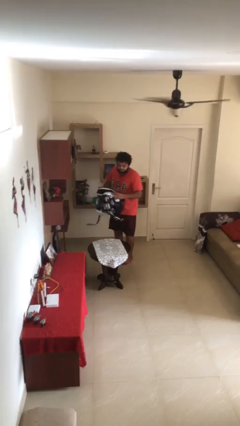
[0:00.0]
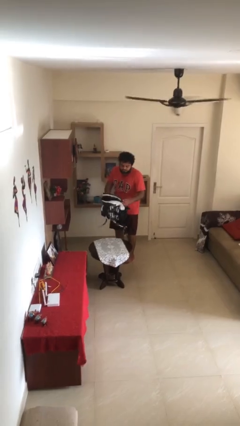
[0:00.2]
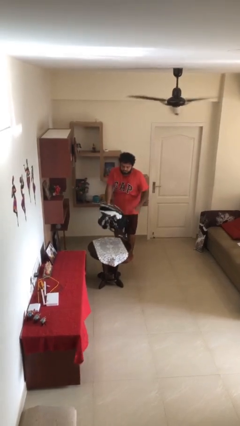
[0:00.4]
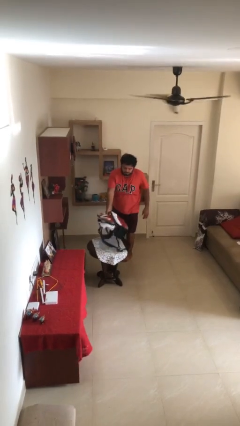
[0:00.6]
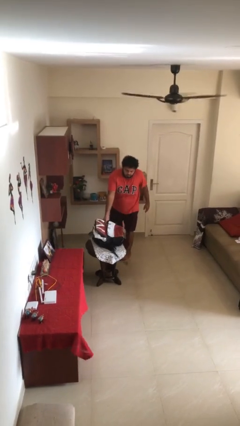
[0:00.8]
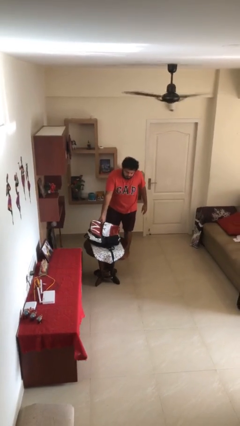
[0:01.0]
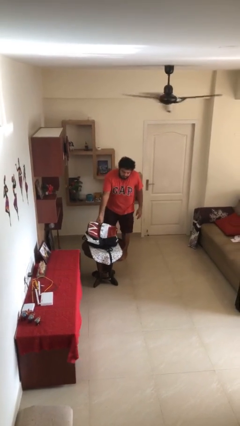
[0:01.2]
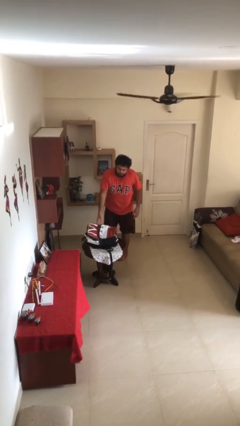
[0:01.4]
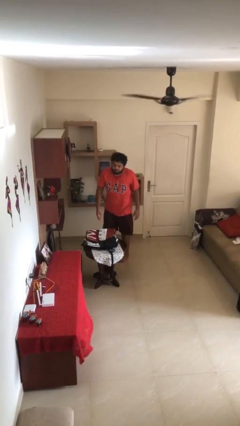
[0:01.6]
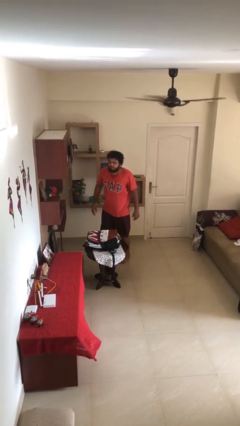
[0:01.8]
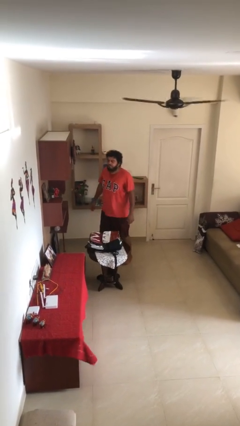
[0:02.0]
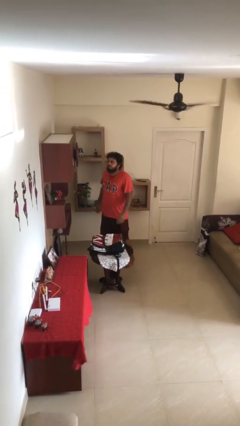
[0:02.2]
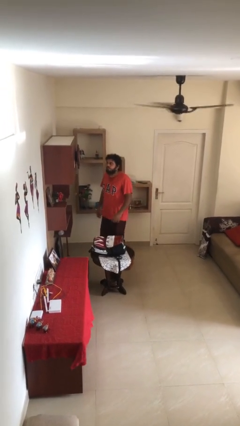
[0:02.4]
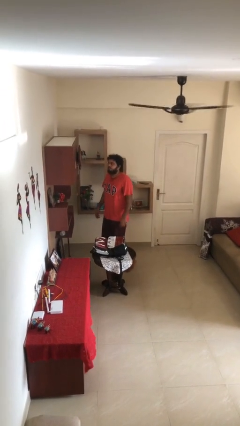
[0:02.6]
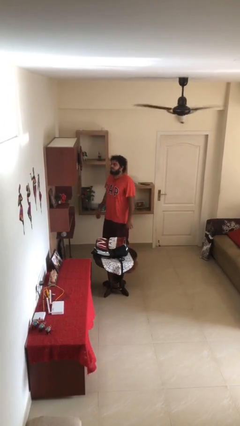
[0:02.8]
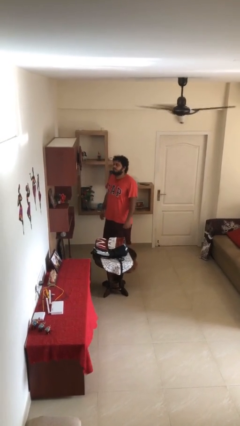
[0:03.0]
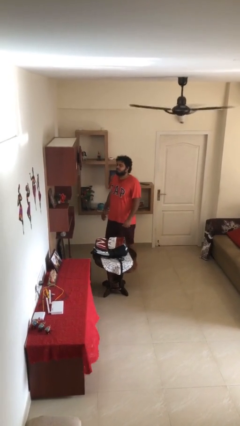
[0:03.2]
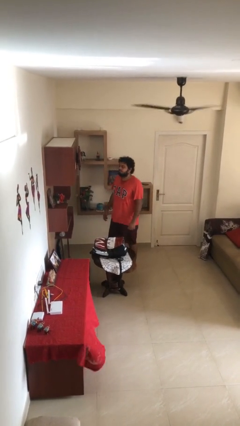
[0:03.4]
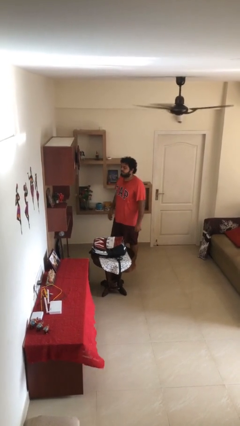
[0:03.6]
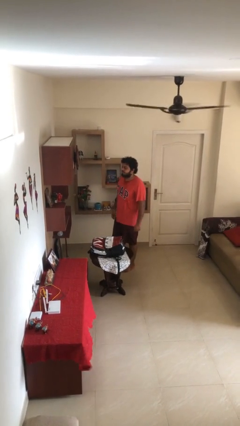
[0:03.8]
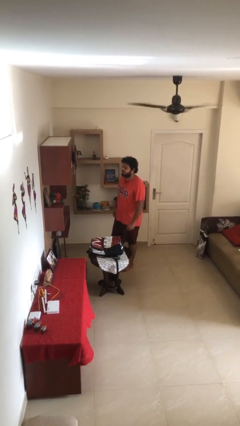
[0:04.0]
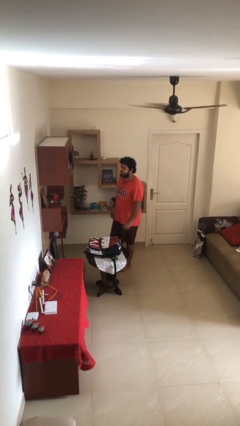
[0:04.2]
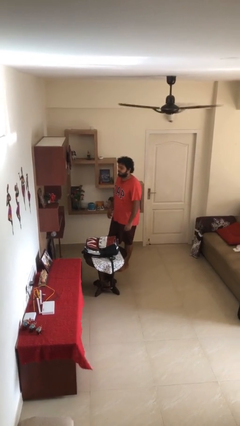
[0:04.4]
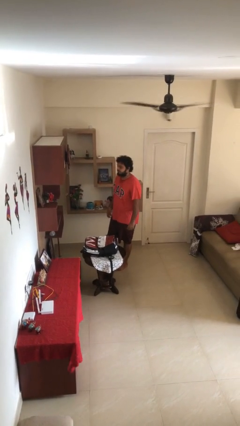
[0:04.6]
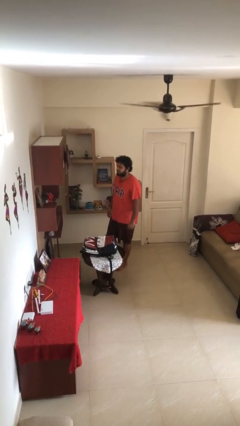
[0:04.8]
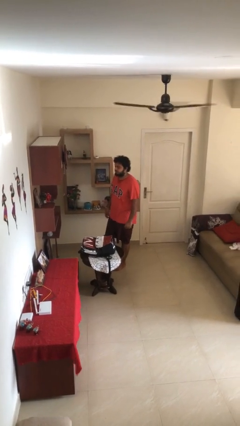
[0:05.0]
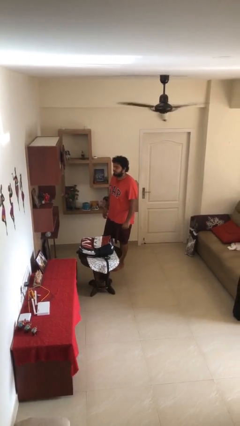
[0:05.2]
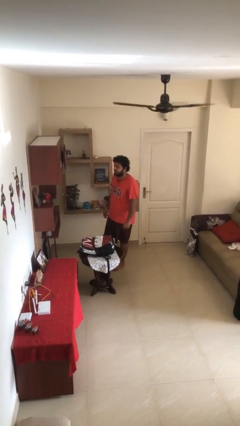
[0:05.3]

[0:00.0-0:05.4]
person puts down object on table

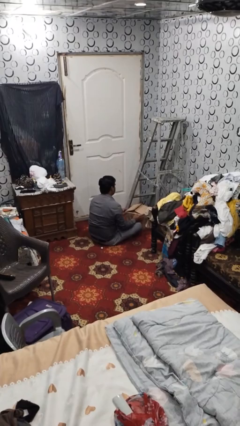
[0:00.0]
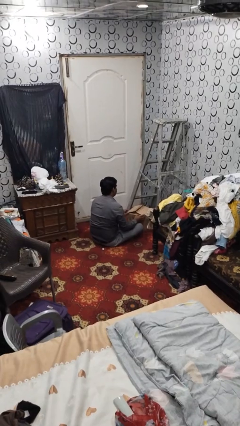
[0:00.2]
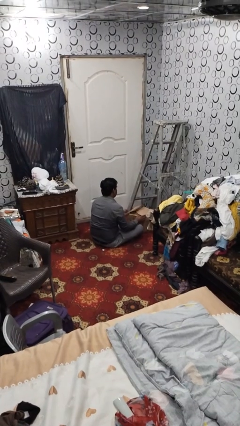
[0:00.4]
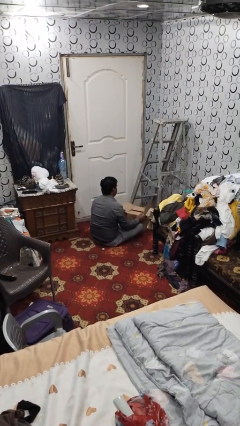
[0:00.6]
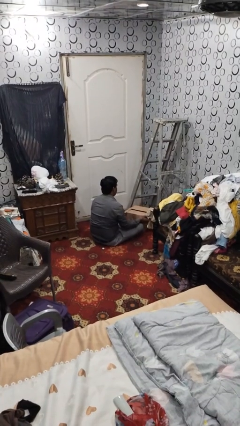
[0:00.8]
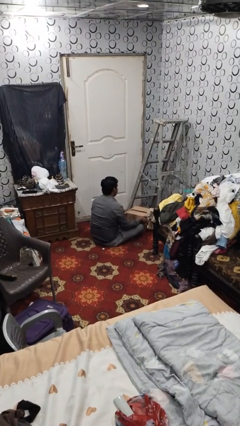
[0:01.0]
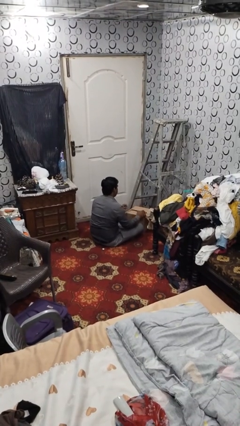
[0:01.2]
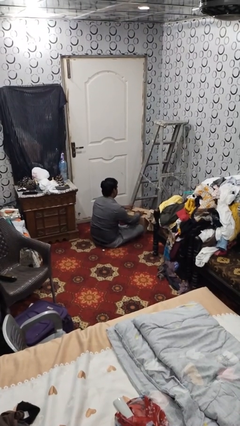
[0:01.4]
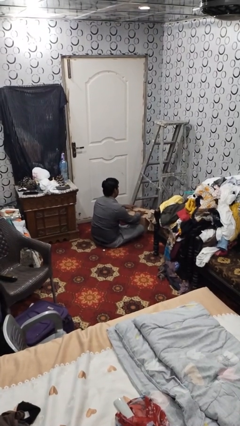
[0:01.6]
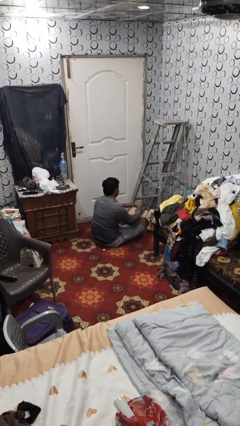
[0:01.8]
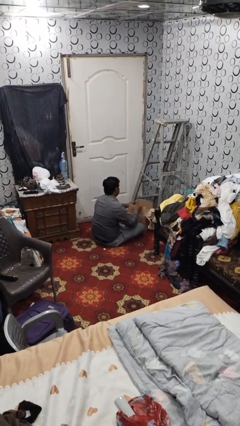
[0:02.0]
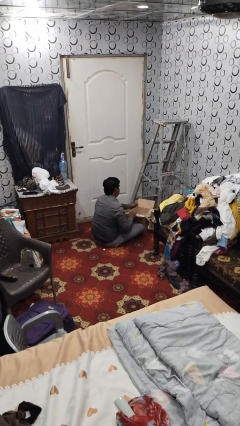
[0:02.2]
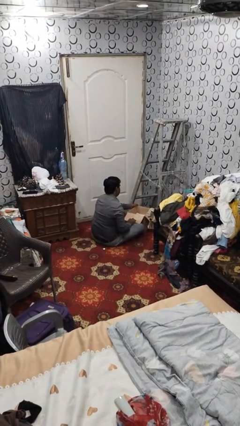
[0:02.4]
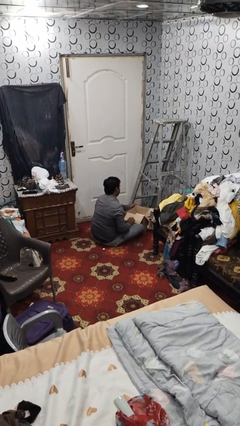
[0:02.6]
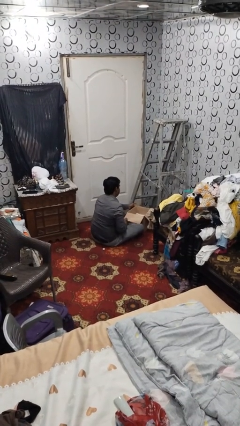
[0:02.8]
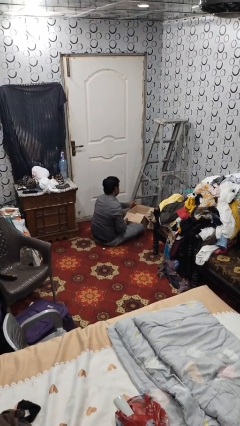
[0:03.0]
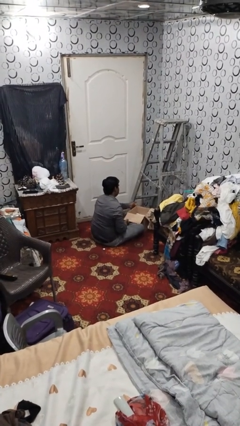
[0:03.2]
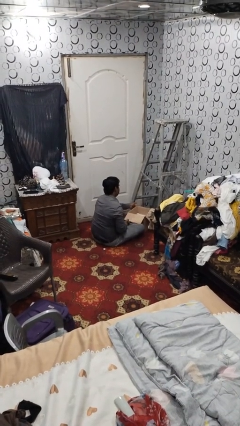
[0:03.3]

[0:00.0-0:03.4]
person opens box

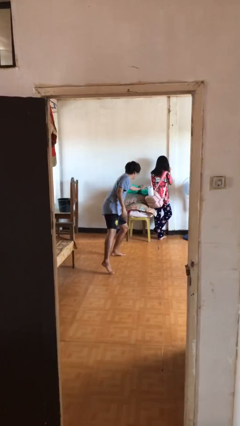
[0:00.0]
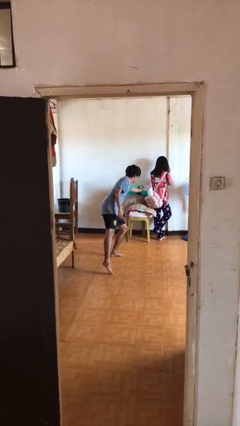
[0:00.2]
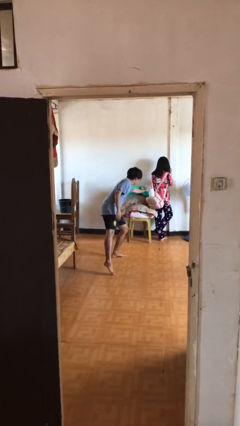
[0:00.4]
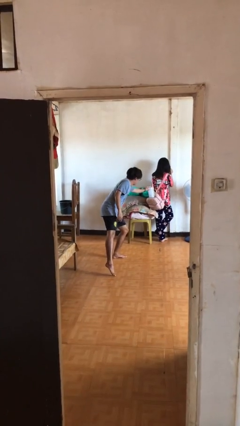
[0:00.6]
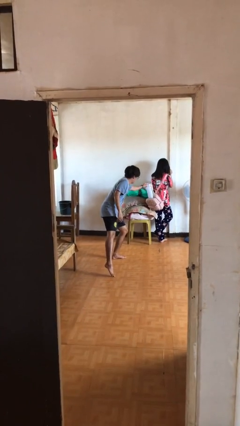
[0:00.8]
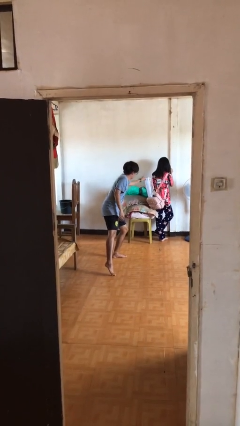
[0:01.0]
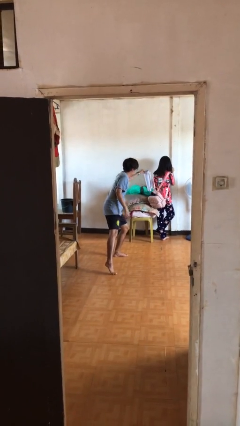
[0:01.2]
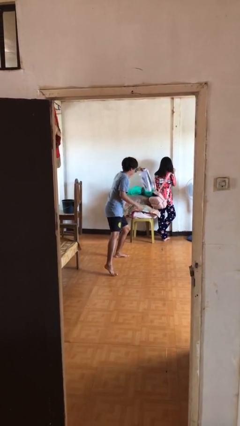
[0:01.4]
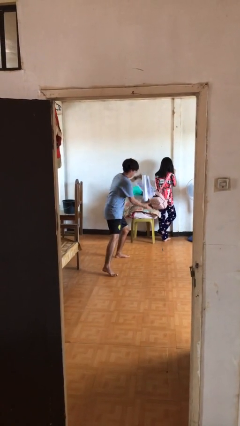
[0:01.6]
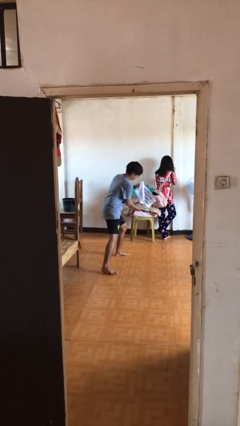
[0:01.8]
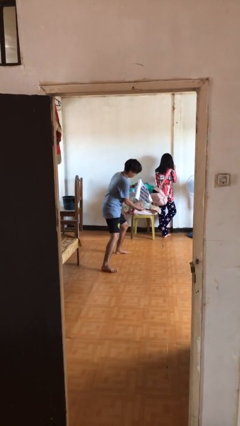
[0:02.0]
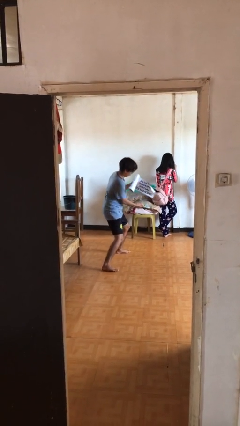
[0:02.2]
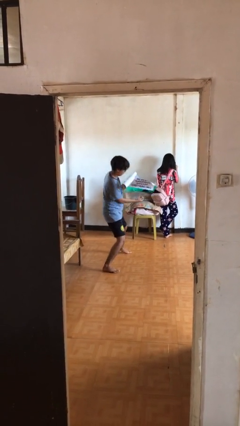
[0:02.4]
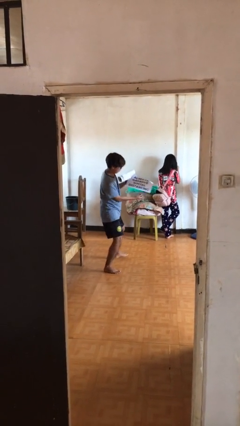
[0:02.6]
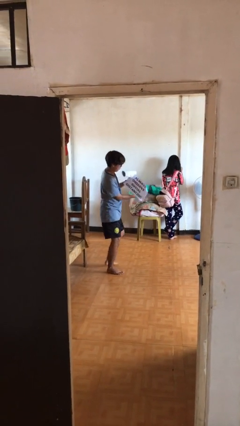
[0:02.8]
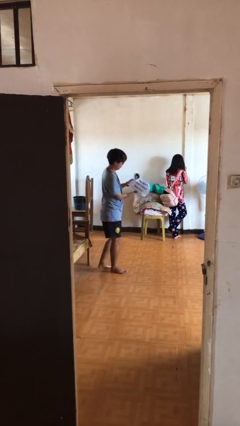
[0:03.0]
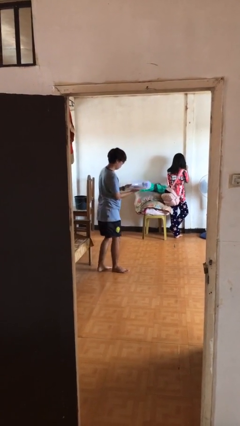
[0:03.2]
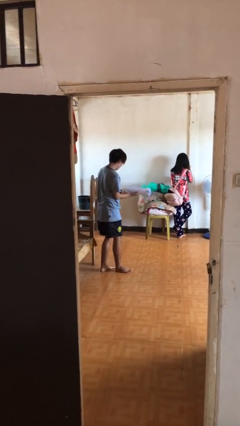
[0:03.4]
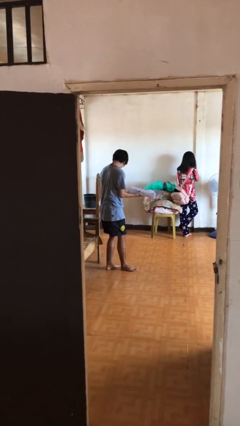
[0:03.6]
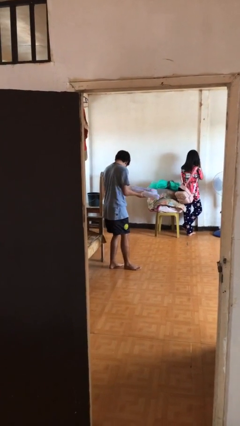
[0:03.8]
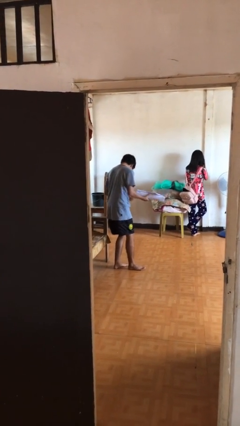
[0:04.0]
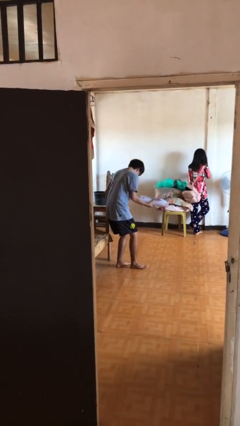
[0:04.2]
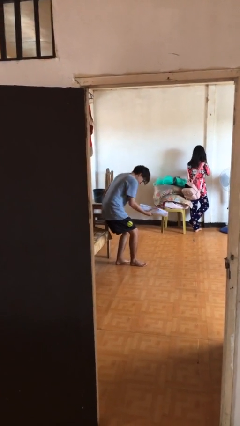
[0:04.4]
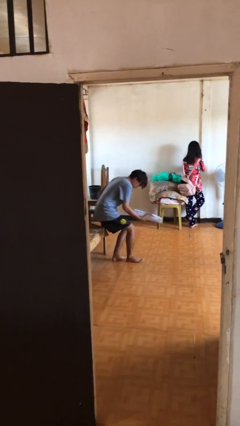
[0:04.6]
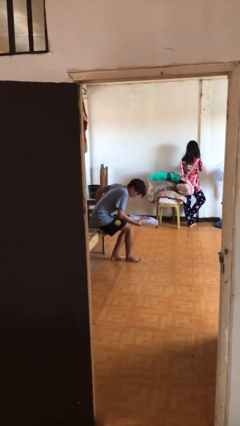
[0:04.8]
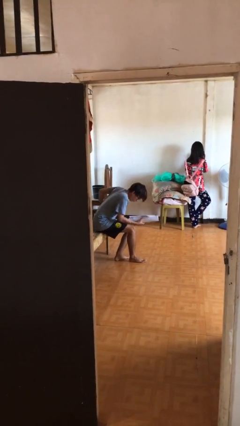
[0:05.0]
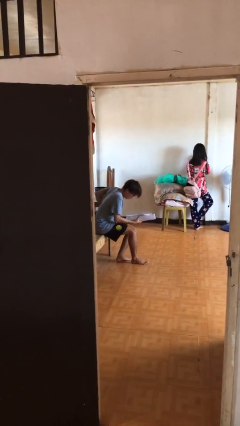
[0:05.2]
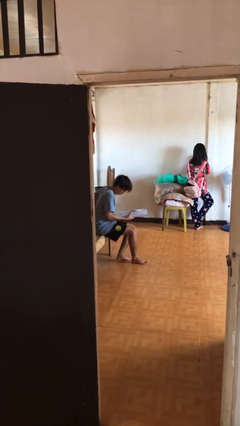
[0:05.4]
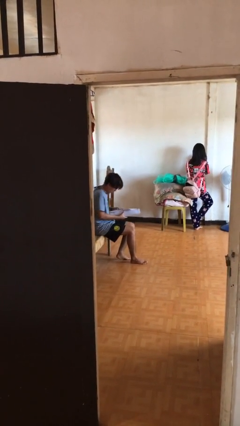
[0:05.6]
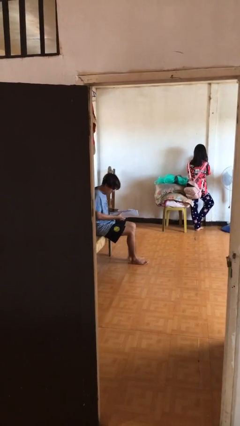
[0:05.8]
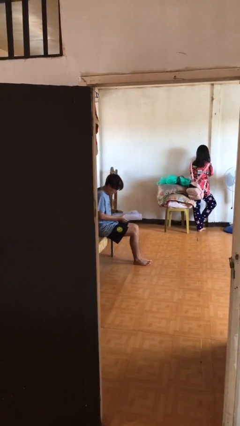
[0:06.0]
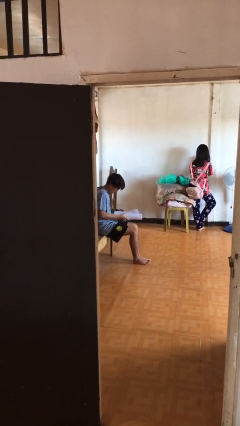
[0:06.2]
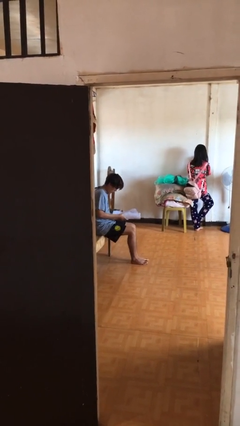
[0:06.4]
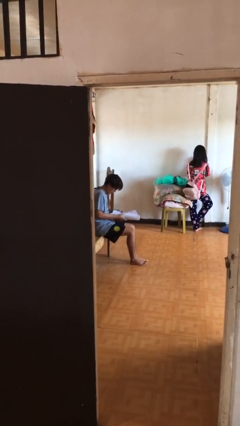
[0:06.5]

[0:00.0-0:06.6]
person steals object from person

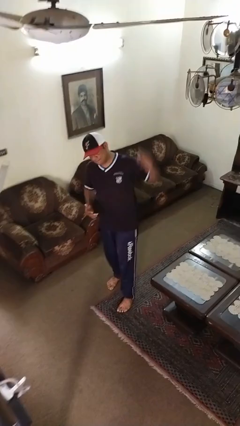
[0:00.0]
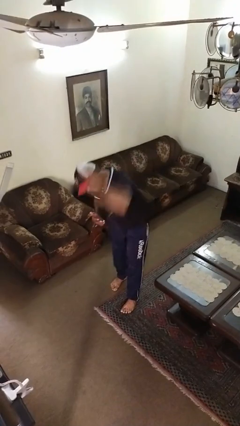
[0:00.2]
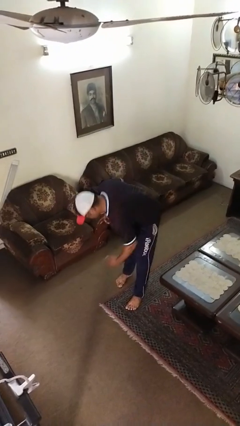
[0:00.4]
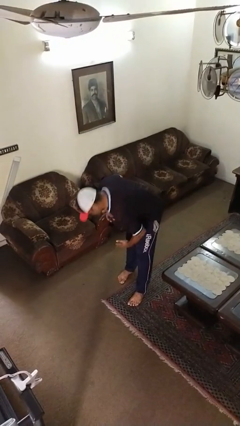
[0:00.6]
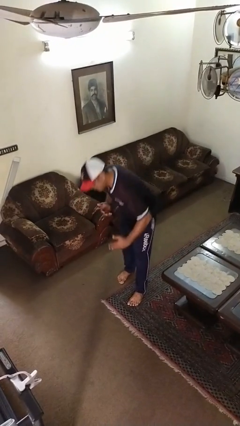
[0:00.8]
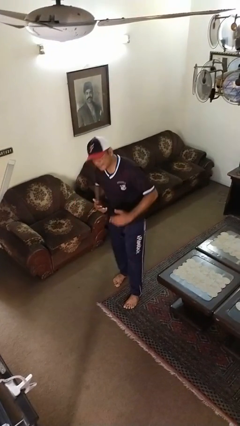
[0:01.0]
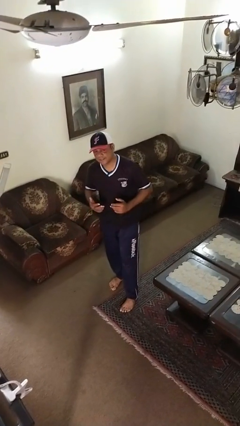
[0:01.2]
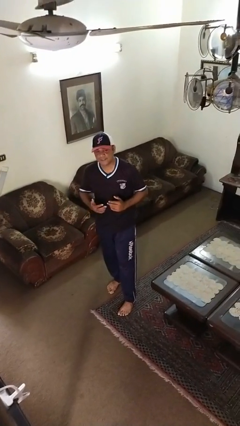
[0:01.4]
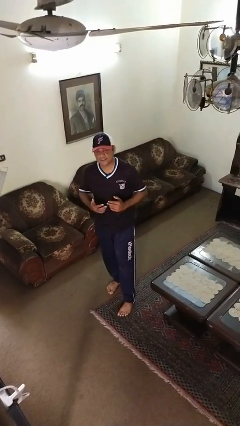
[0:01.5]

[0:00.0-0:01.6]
person karate chop

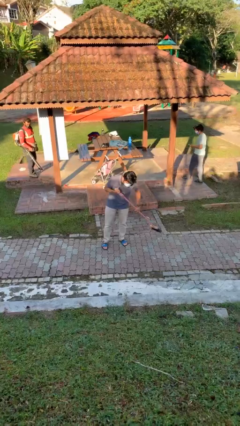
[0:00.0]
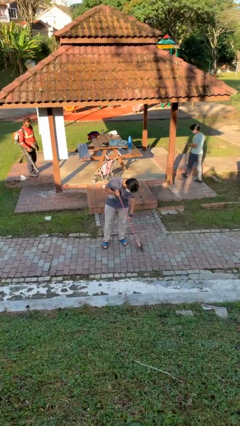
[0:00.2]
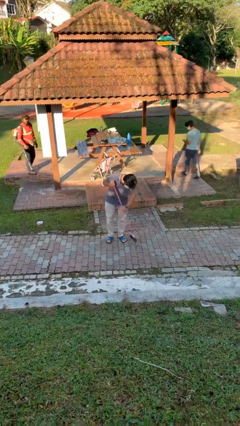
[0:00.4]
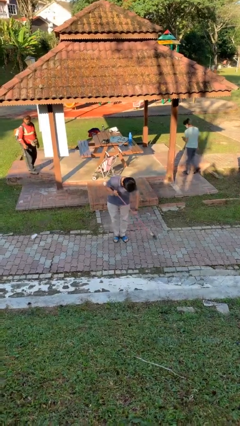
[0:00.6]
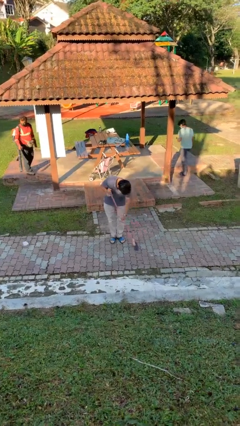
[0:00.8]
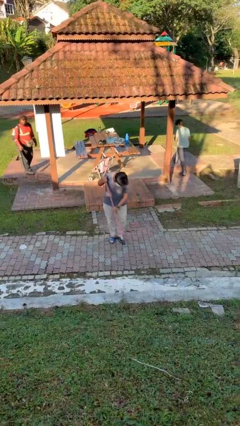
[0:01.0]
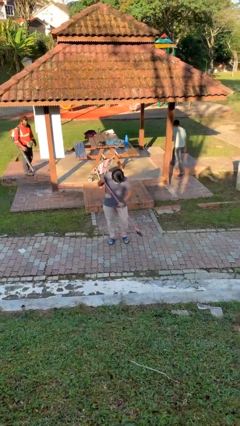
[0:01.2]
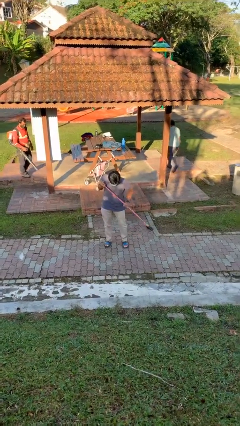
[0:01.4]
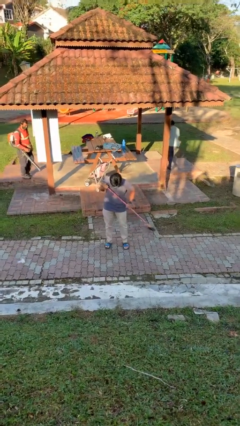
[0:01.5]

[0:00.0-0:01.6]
person sweeps floor
